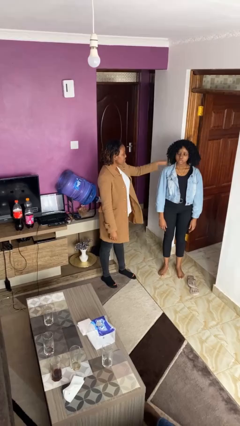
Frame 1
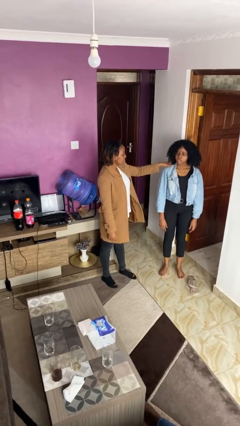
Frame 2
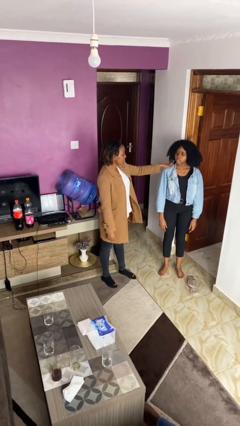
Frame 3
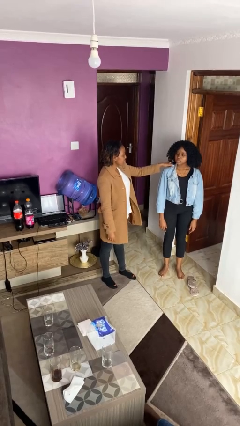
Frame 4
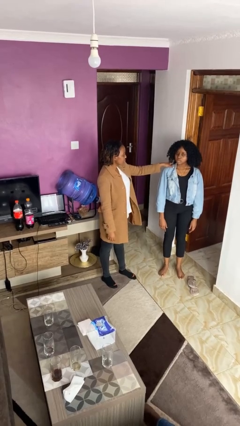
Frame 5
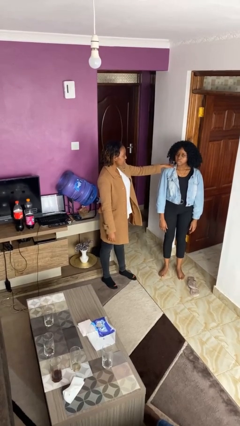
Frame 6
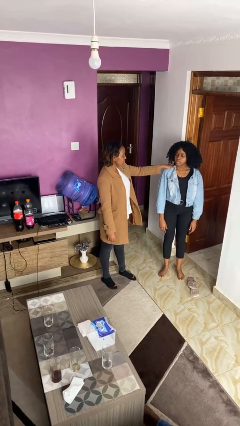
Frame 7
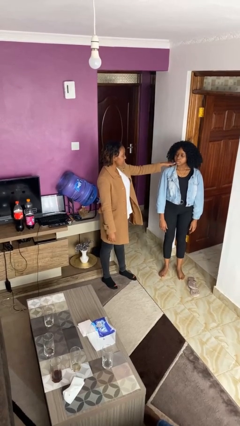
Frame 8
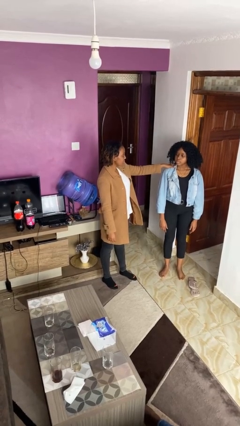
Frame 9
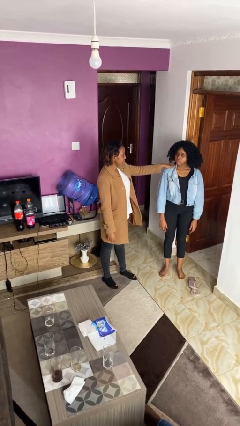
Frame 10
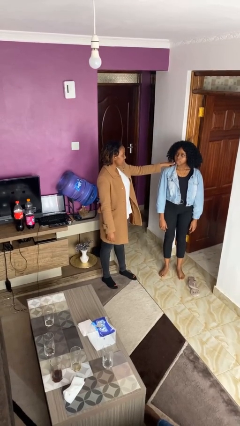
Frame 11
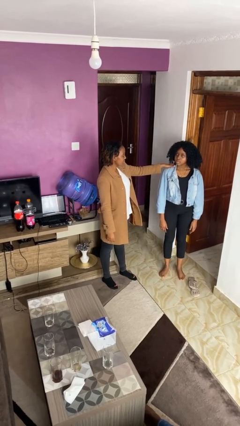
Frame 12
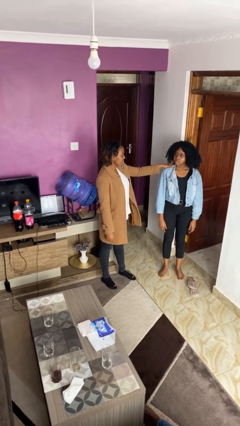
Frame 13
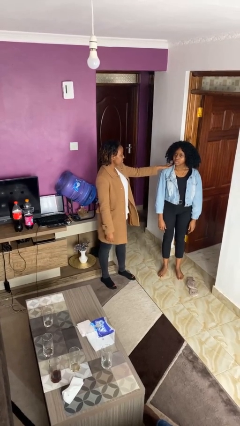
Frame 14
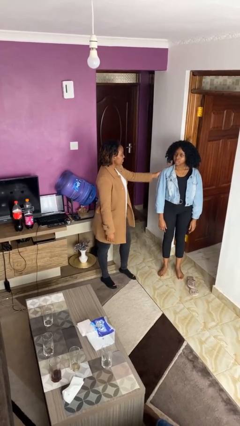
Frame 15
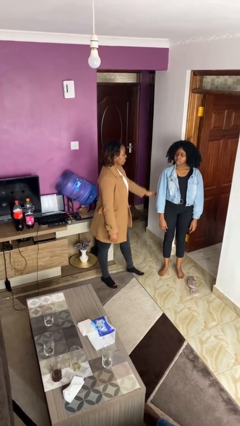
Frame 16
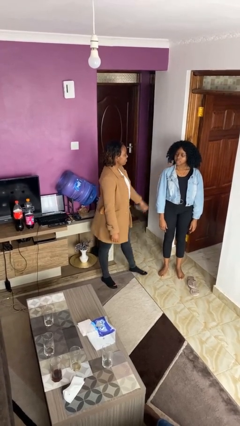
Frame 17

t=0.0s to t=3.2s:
person pounds shoulders of person

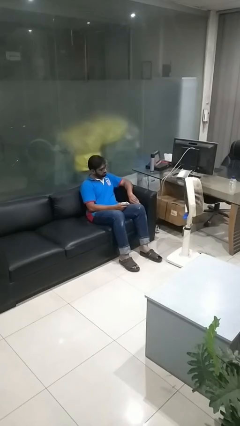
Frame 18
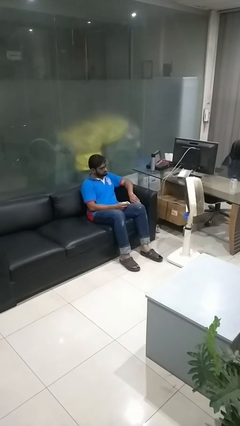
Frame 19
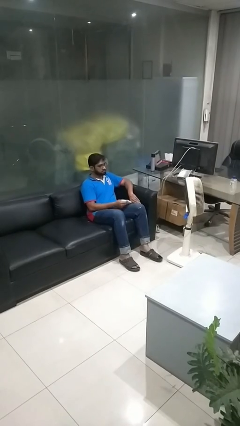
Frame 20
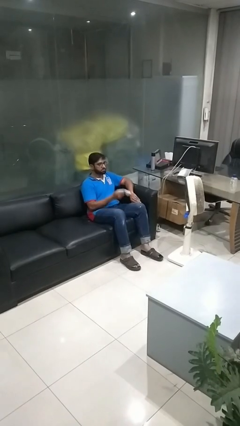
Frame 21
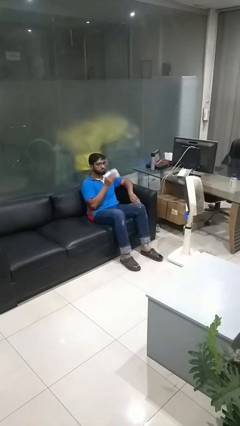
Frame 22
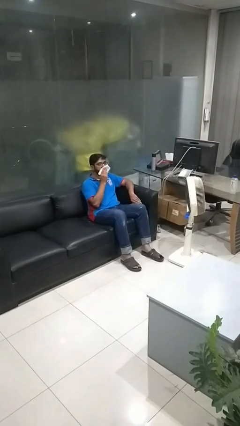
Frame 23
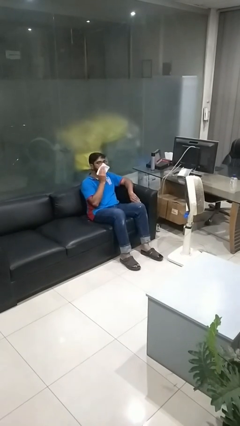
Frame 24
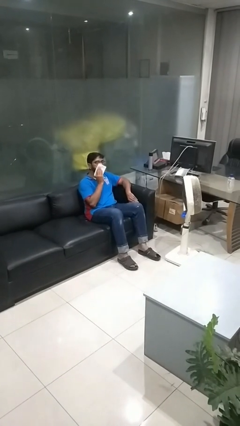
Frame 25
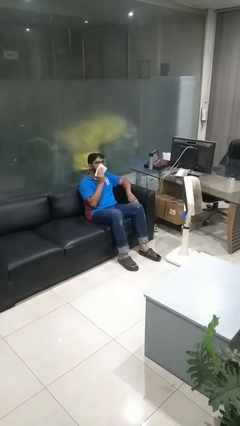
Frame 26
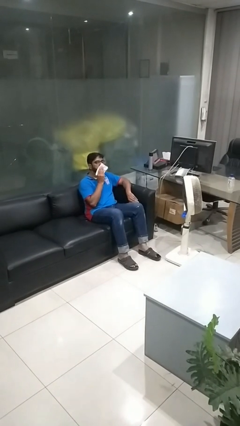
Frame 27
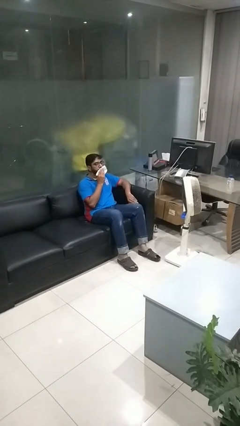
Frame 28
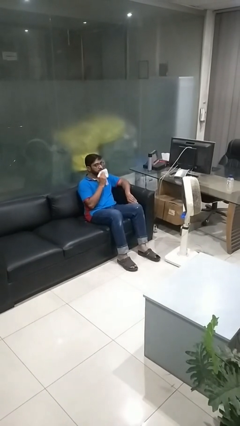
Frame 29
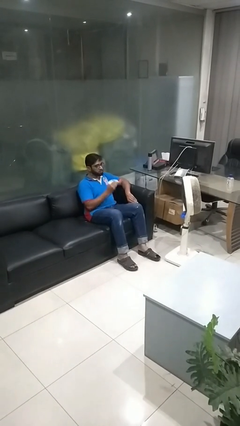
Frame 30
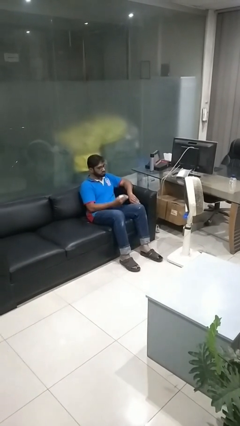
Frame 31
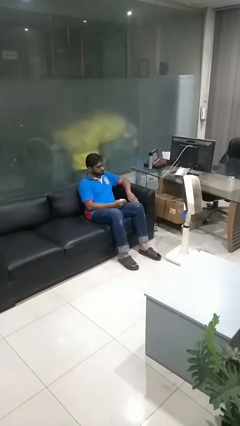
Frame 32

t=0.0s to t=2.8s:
person wipes mouth with napkin

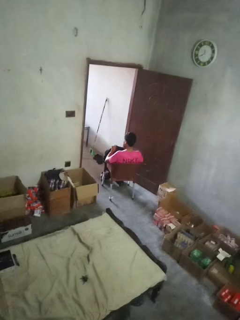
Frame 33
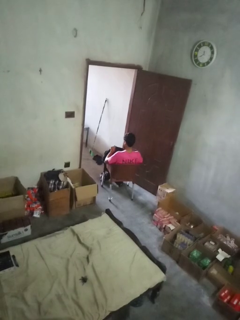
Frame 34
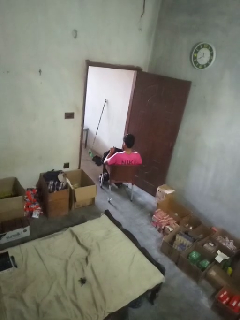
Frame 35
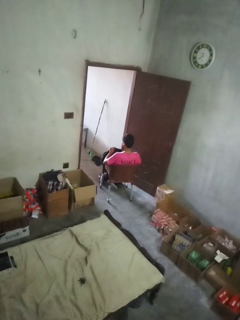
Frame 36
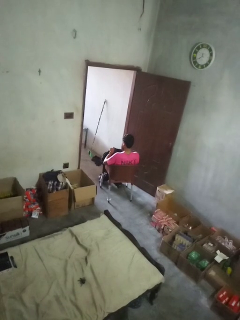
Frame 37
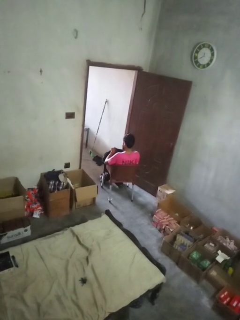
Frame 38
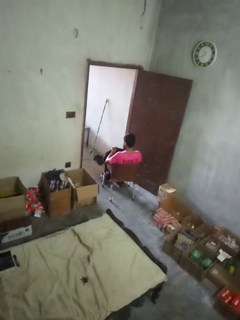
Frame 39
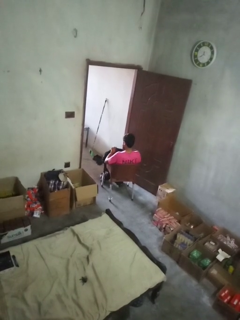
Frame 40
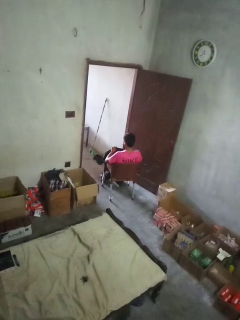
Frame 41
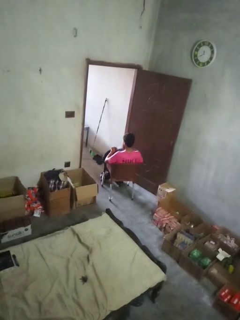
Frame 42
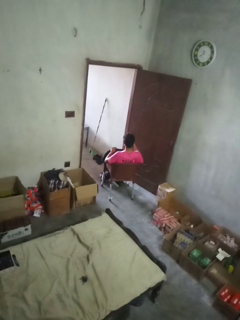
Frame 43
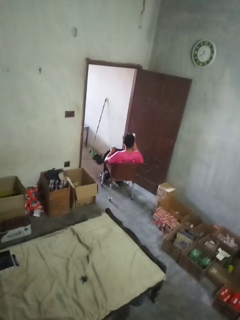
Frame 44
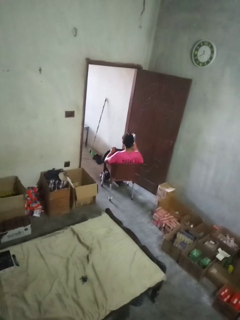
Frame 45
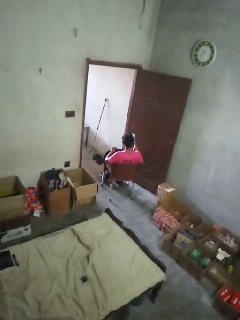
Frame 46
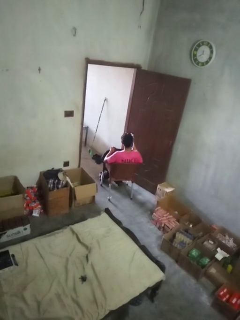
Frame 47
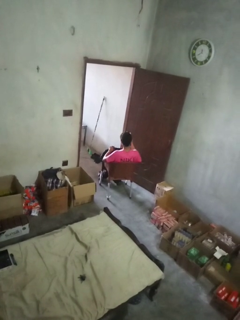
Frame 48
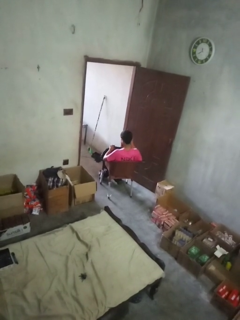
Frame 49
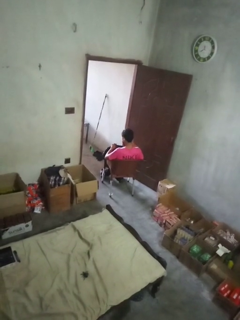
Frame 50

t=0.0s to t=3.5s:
person takes object from backpack

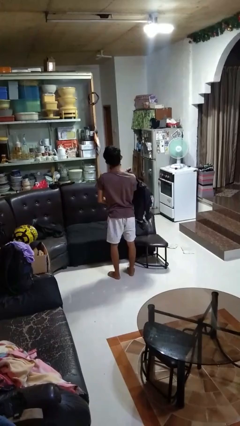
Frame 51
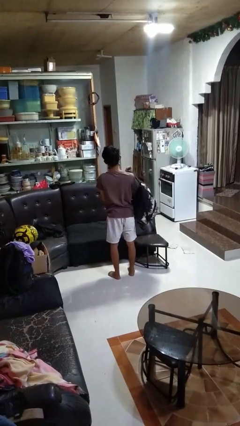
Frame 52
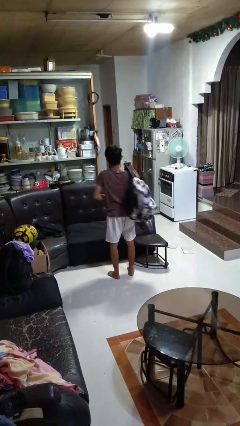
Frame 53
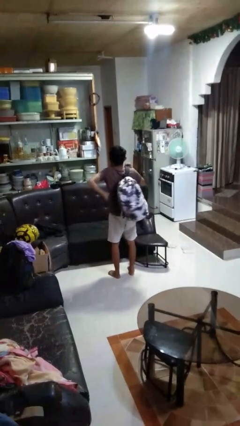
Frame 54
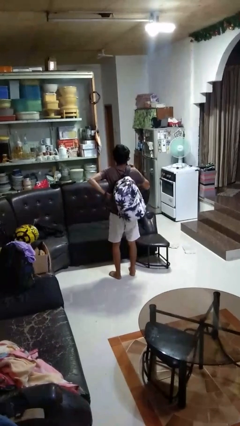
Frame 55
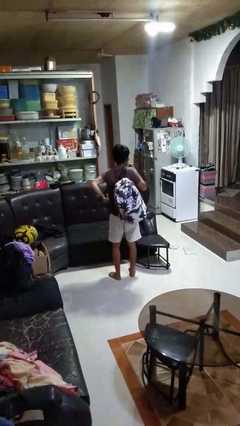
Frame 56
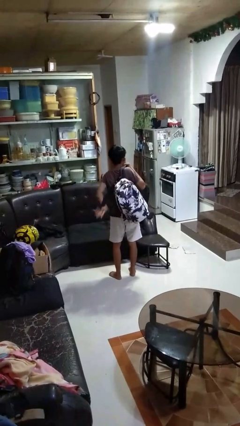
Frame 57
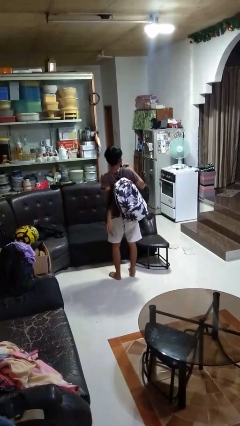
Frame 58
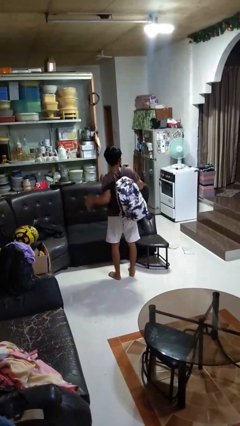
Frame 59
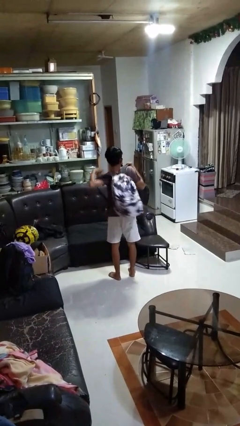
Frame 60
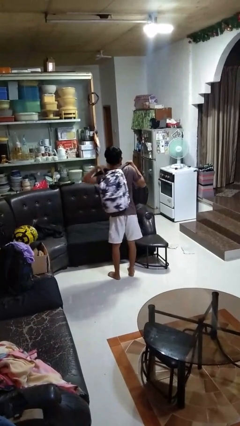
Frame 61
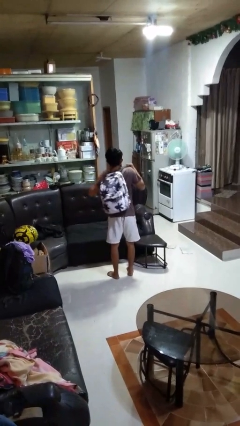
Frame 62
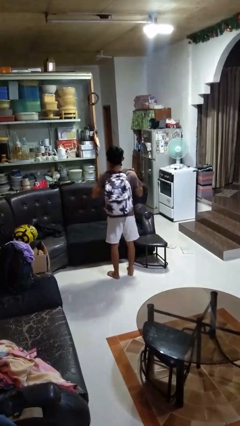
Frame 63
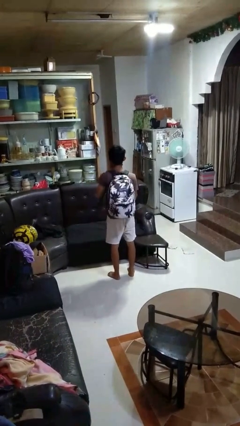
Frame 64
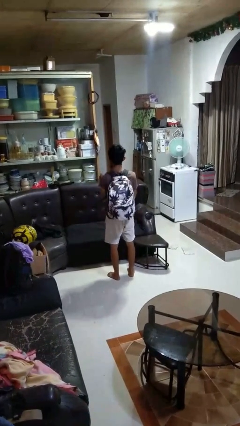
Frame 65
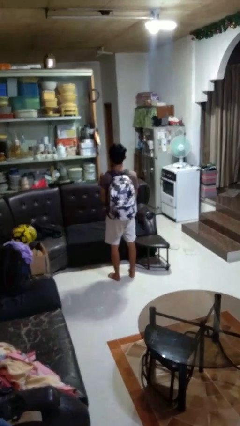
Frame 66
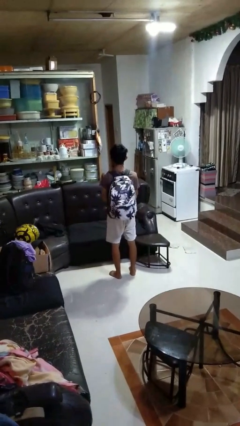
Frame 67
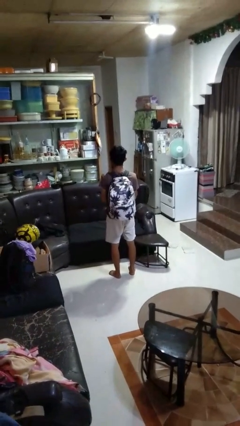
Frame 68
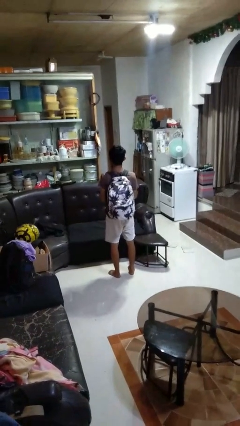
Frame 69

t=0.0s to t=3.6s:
person puts on backpack

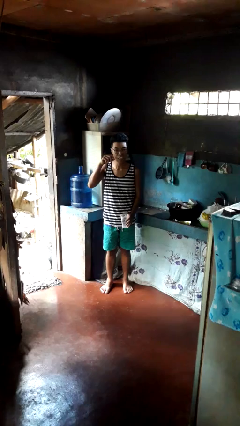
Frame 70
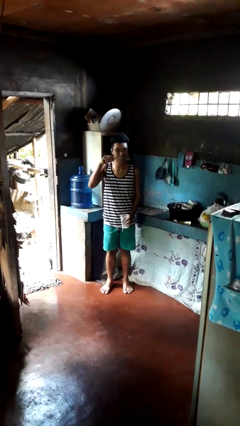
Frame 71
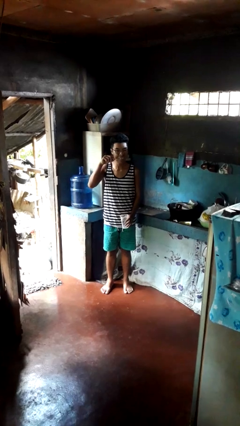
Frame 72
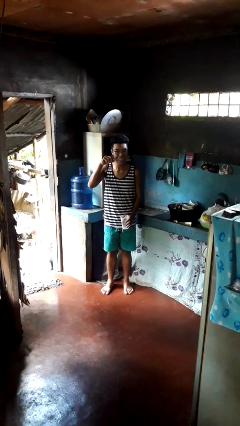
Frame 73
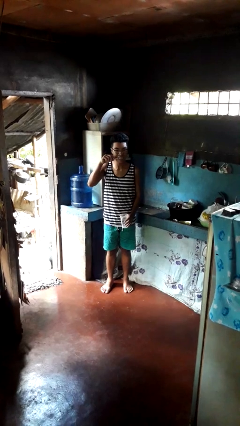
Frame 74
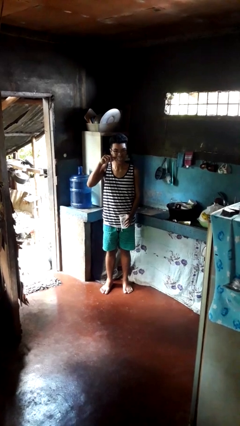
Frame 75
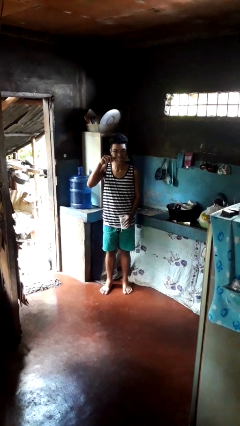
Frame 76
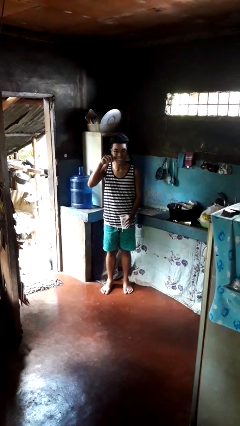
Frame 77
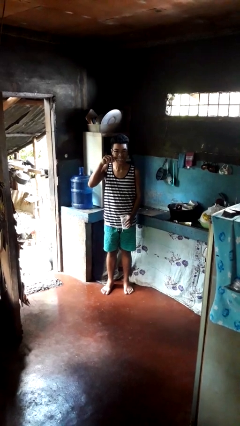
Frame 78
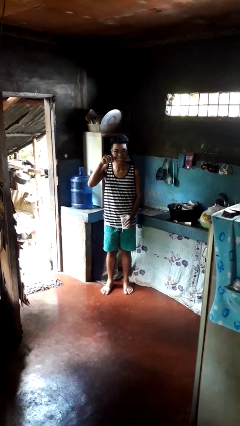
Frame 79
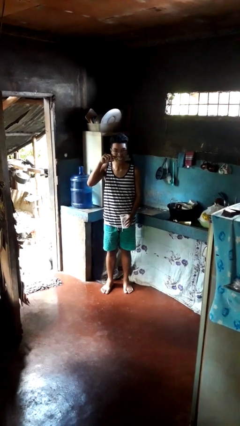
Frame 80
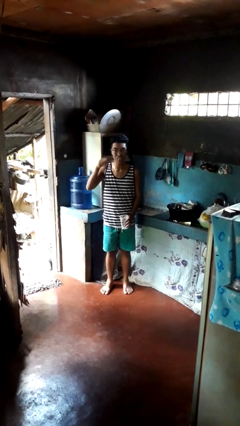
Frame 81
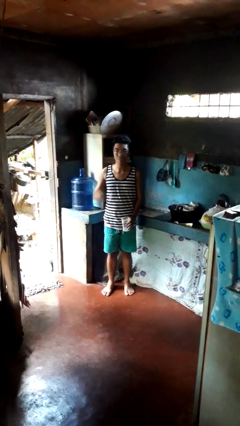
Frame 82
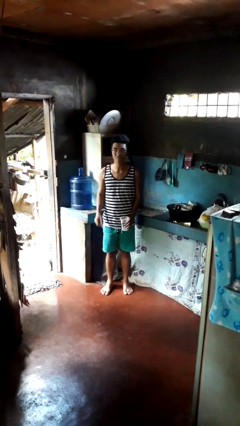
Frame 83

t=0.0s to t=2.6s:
person brushes teeth

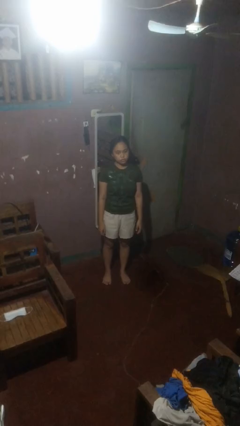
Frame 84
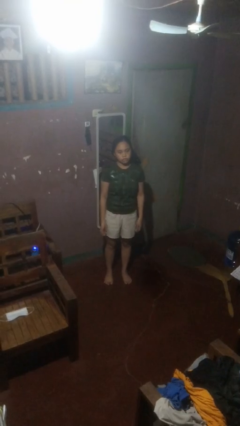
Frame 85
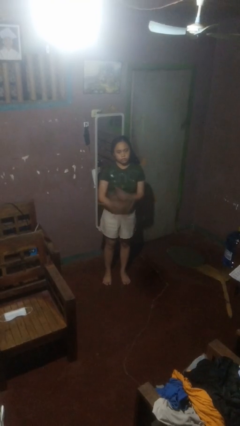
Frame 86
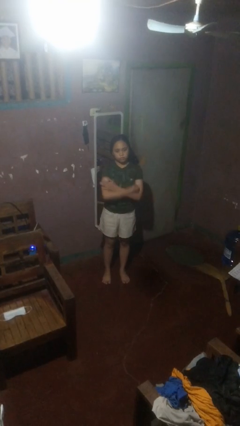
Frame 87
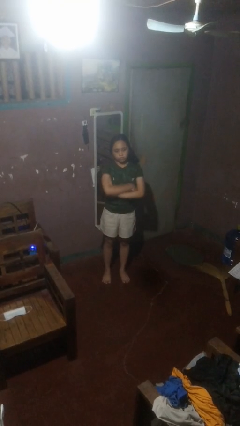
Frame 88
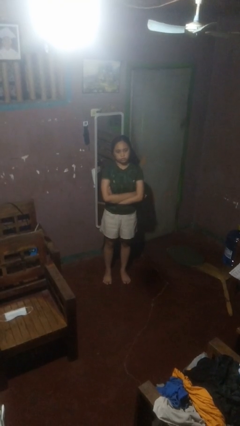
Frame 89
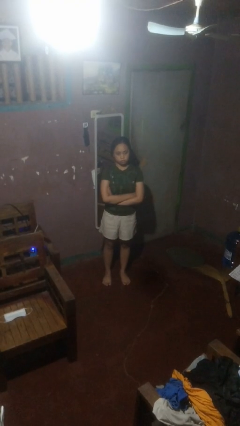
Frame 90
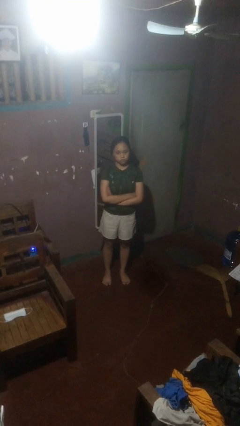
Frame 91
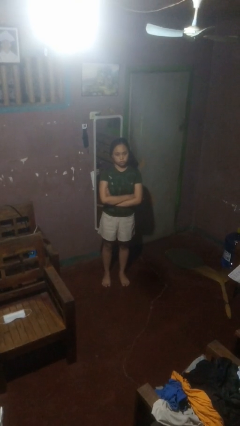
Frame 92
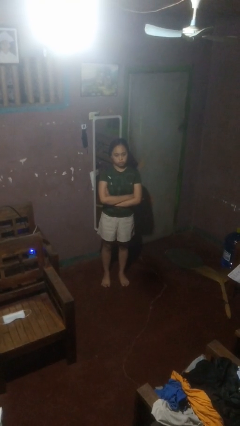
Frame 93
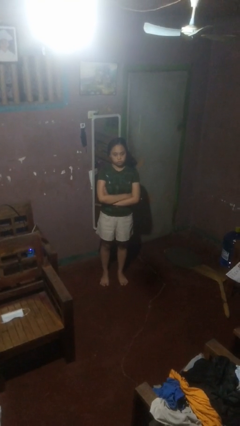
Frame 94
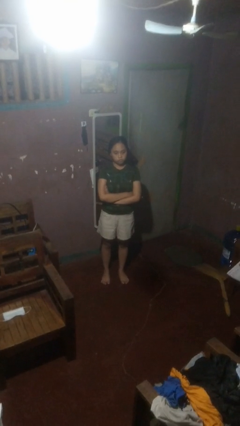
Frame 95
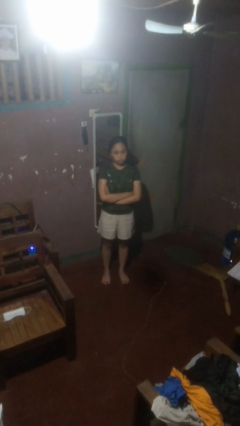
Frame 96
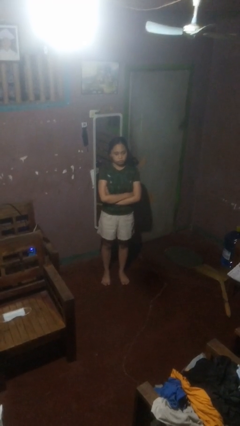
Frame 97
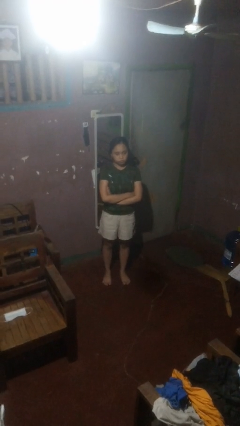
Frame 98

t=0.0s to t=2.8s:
person crosses arms
